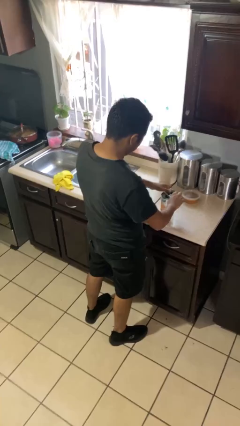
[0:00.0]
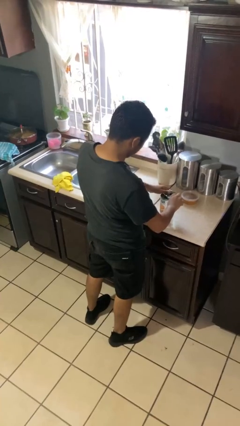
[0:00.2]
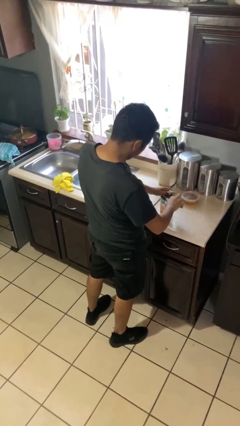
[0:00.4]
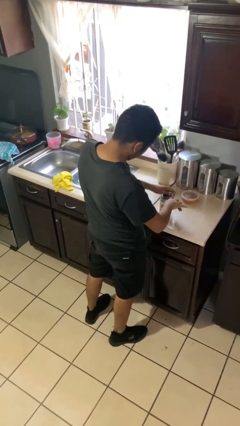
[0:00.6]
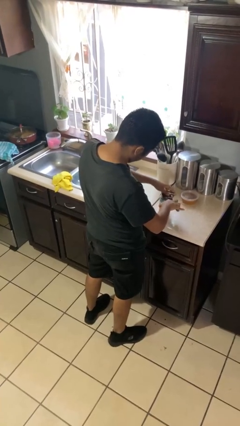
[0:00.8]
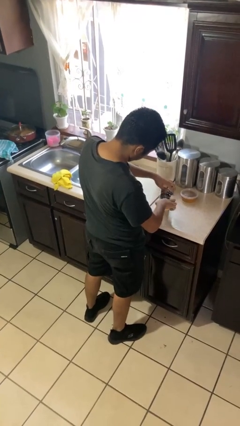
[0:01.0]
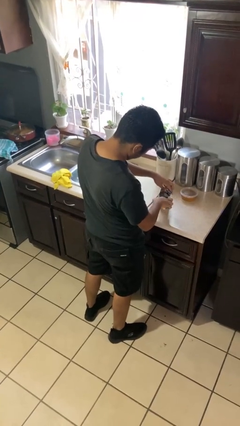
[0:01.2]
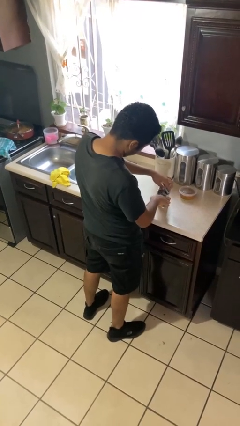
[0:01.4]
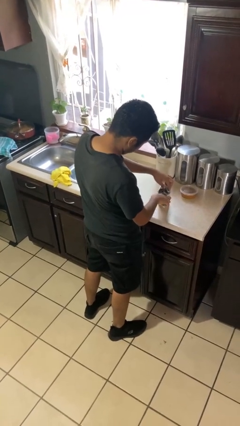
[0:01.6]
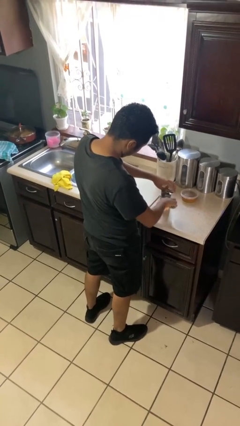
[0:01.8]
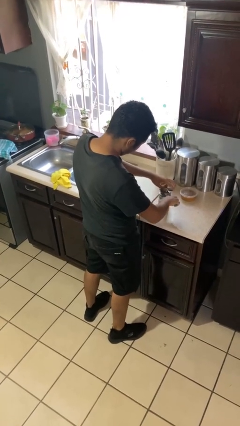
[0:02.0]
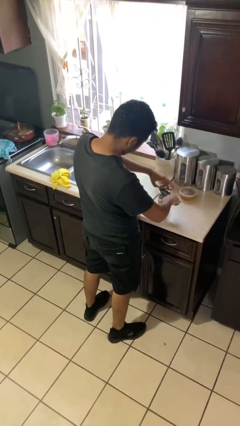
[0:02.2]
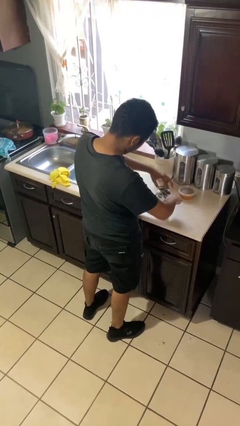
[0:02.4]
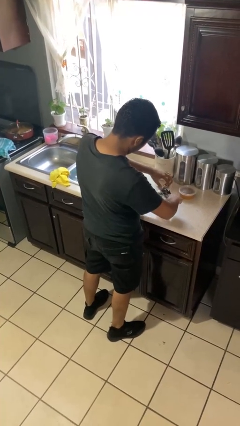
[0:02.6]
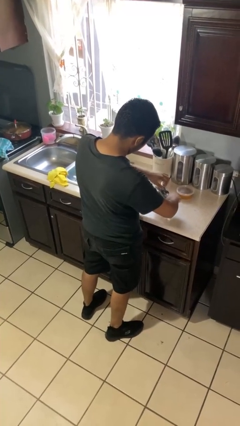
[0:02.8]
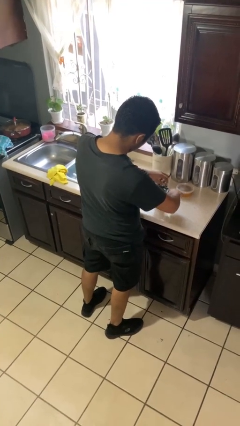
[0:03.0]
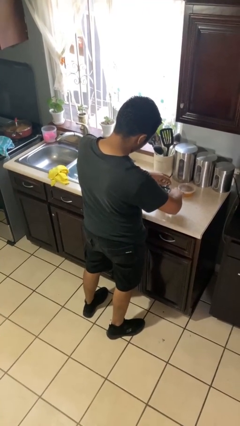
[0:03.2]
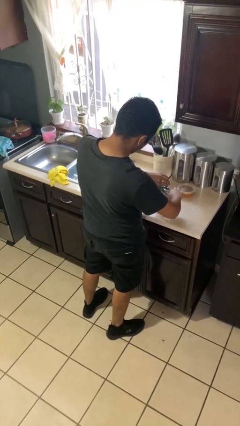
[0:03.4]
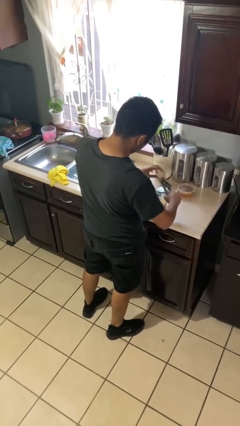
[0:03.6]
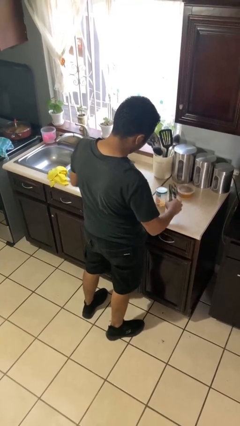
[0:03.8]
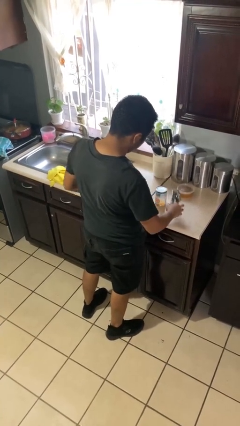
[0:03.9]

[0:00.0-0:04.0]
person opens can with can opener

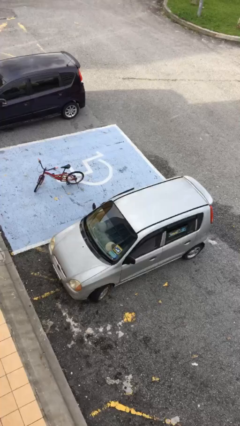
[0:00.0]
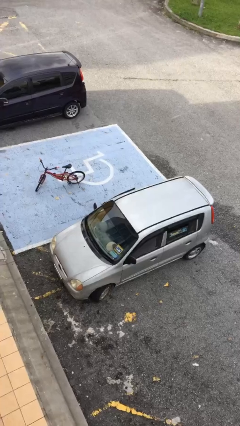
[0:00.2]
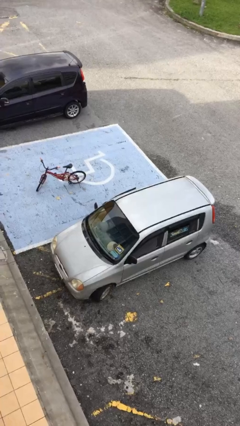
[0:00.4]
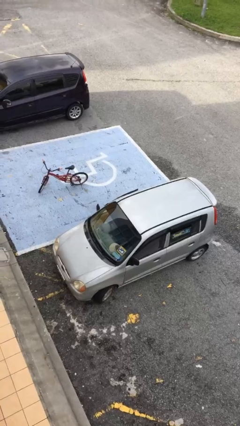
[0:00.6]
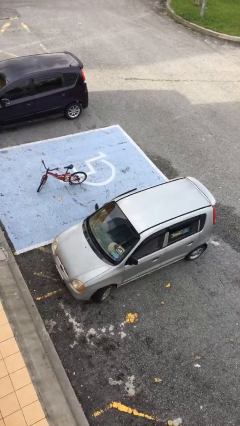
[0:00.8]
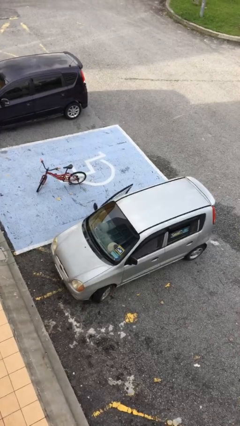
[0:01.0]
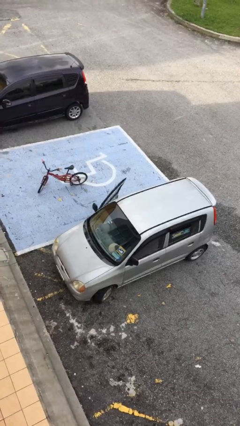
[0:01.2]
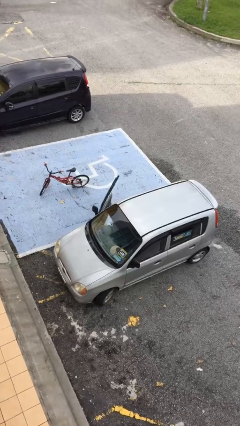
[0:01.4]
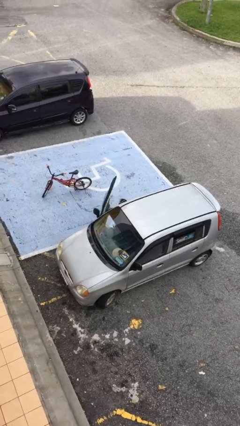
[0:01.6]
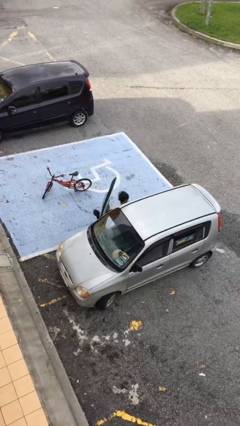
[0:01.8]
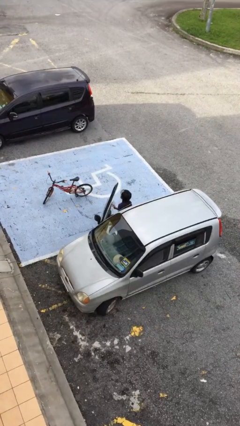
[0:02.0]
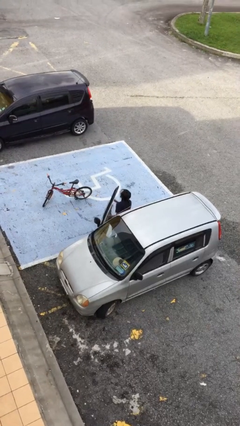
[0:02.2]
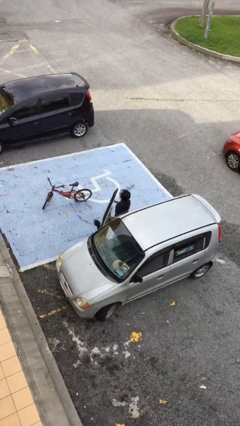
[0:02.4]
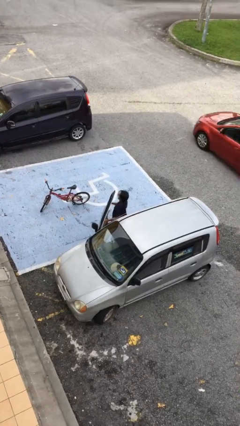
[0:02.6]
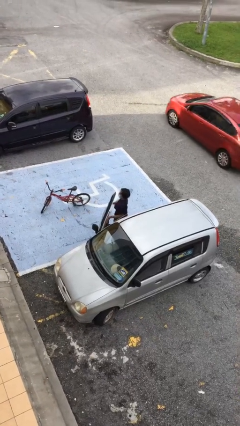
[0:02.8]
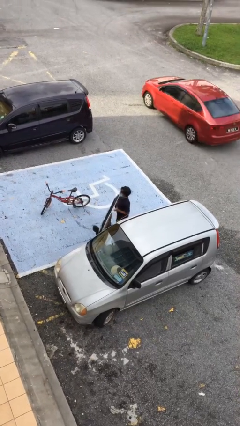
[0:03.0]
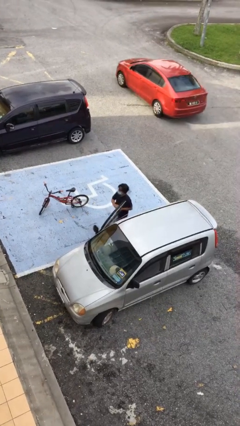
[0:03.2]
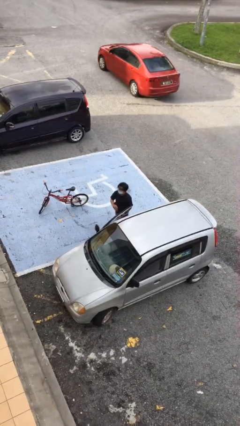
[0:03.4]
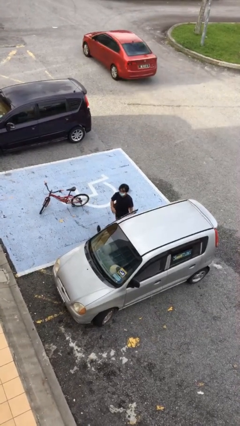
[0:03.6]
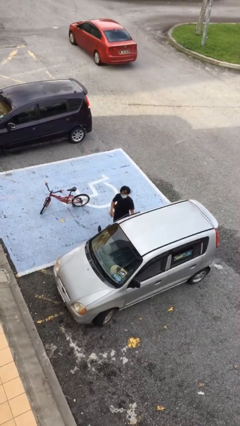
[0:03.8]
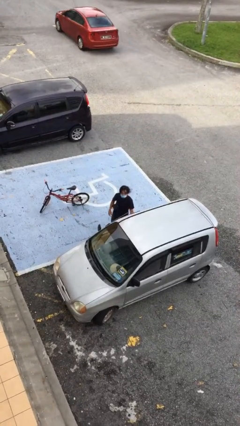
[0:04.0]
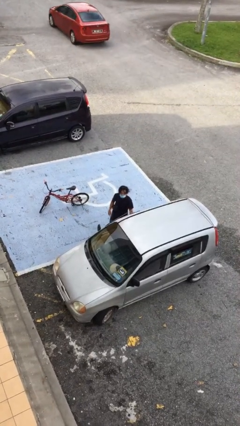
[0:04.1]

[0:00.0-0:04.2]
person exits car

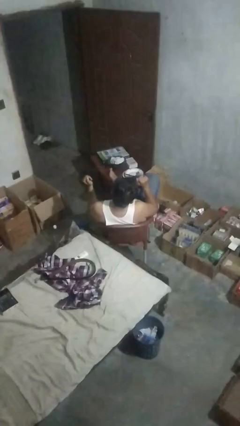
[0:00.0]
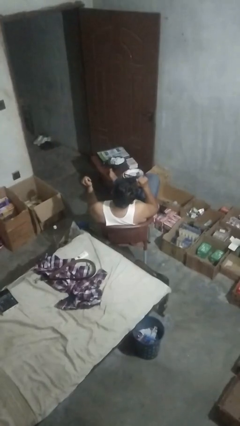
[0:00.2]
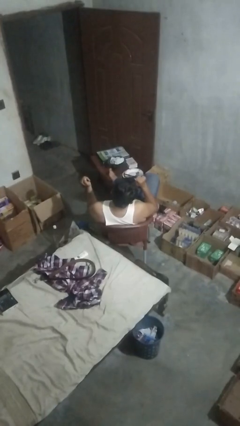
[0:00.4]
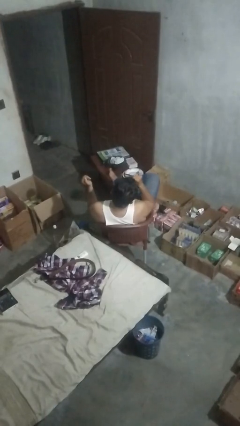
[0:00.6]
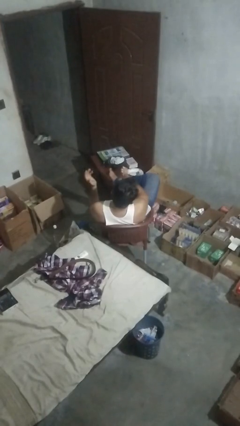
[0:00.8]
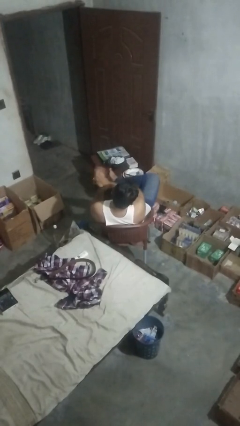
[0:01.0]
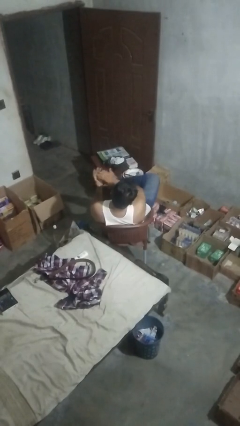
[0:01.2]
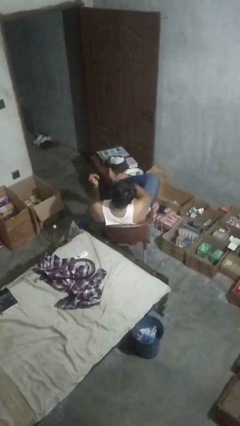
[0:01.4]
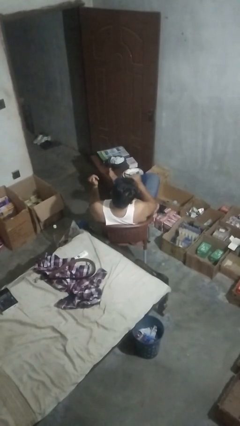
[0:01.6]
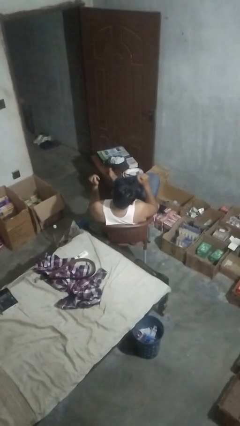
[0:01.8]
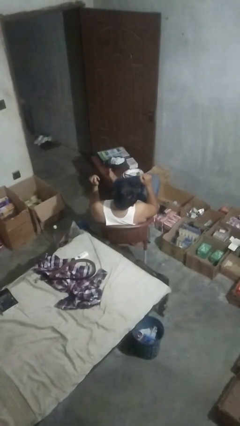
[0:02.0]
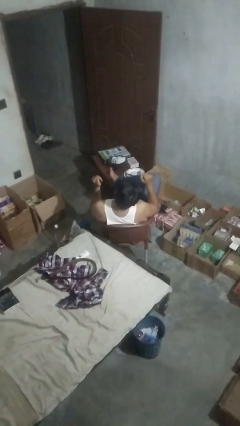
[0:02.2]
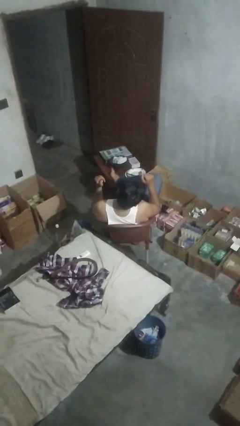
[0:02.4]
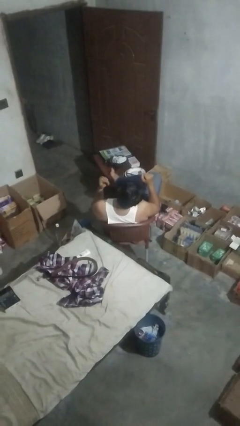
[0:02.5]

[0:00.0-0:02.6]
person claps hands

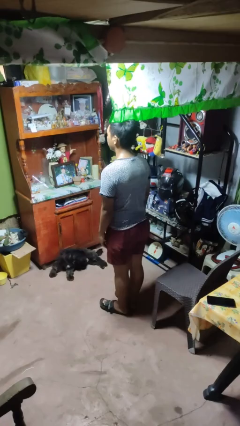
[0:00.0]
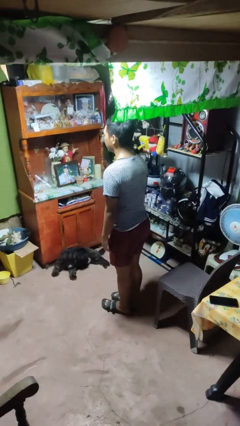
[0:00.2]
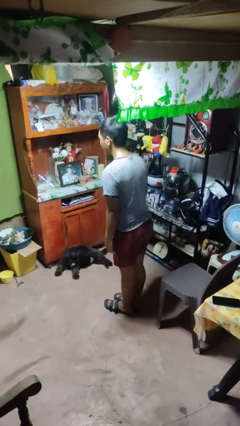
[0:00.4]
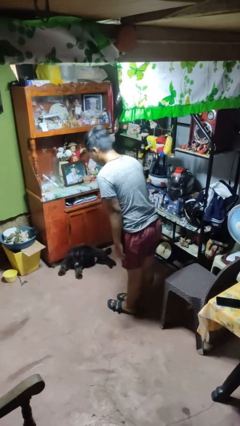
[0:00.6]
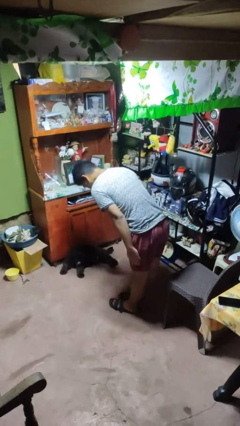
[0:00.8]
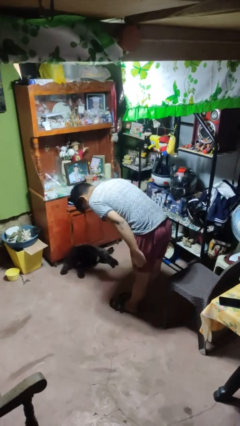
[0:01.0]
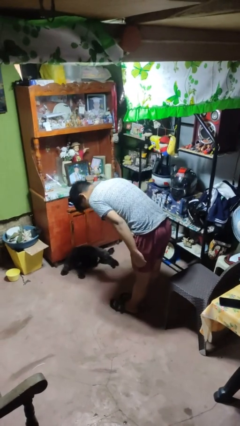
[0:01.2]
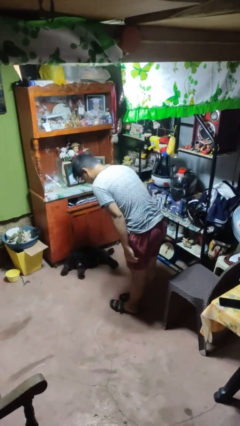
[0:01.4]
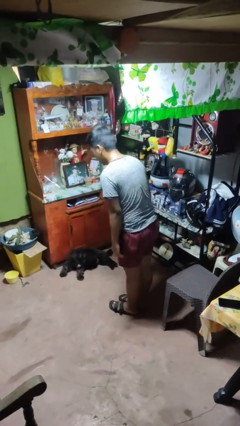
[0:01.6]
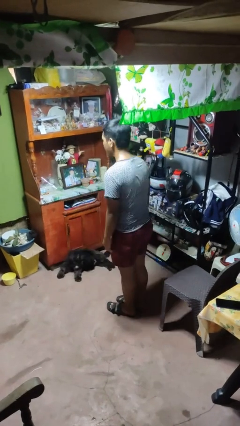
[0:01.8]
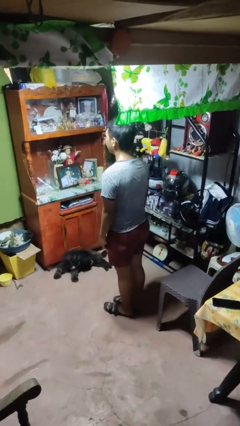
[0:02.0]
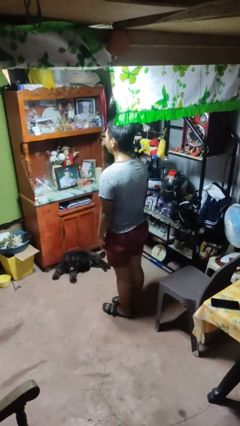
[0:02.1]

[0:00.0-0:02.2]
person bows

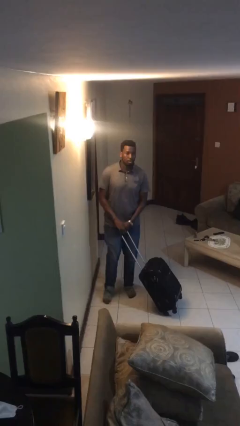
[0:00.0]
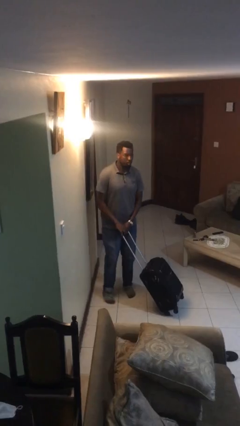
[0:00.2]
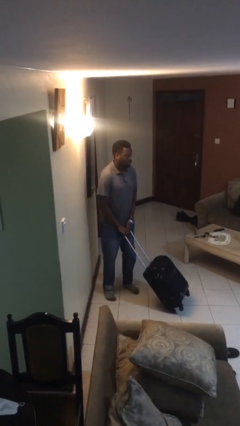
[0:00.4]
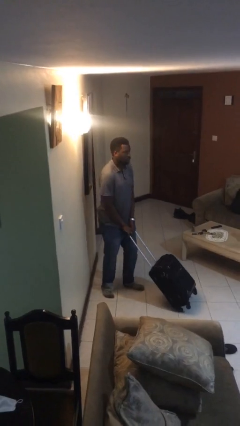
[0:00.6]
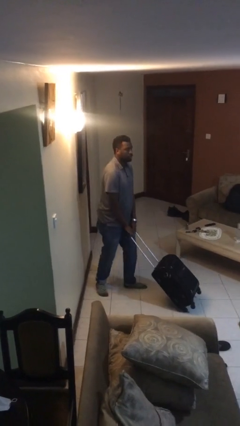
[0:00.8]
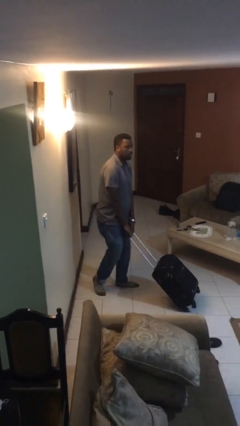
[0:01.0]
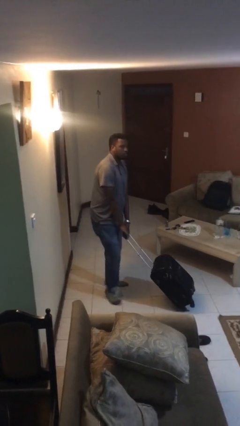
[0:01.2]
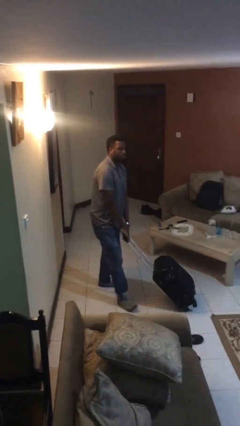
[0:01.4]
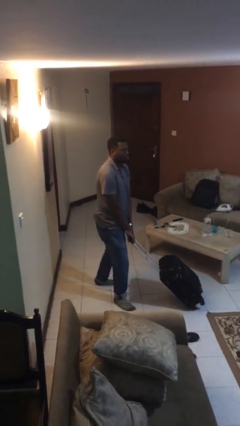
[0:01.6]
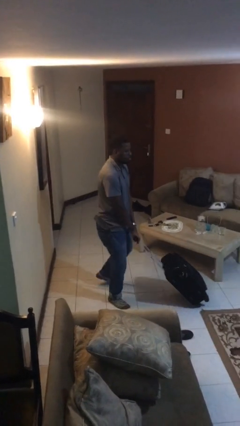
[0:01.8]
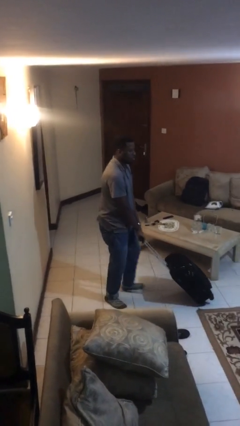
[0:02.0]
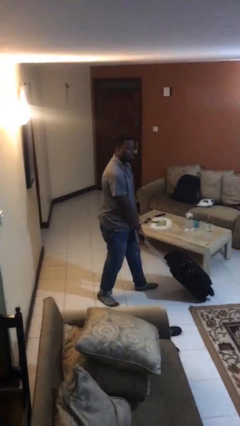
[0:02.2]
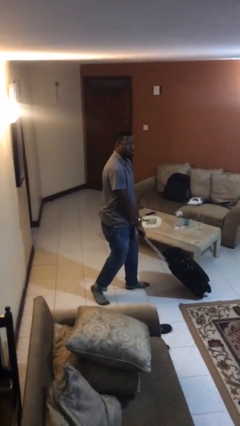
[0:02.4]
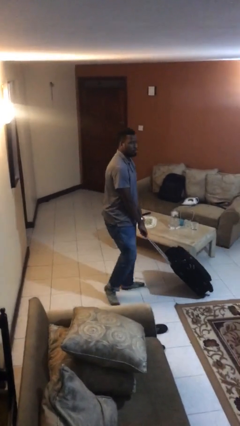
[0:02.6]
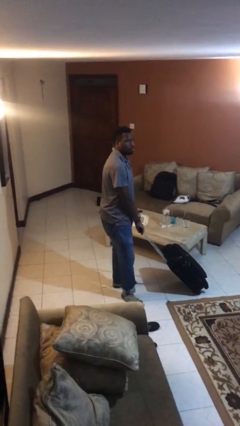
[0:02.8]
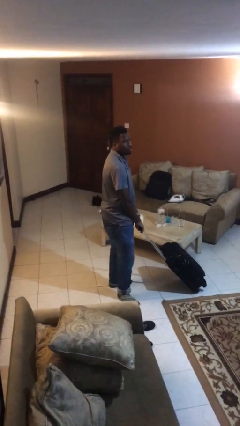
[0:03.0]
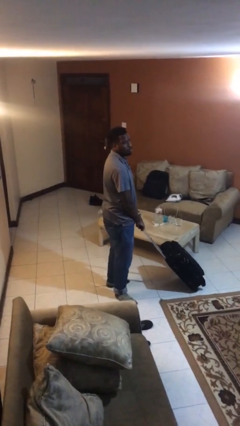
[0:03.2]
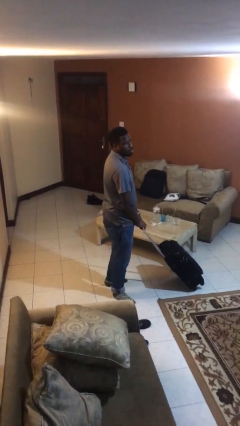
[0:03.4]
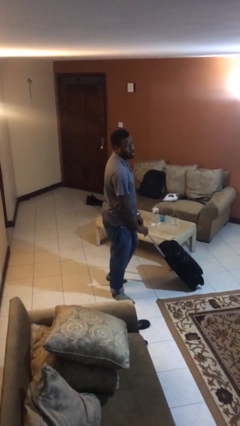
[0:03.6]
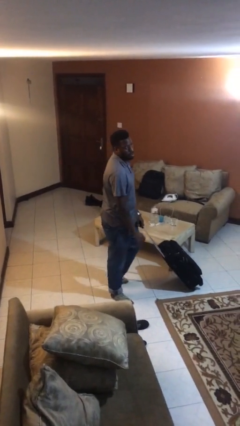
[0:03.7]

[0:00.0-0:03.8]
person pushes wheeled cart

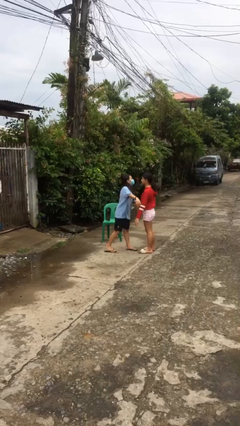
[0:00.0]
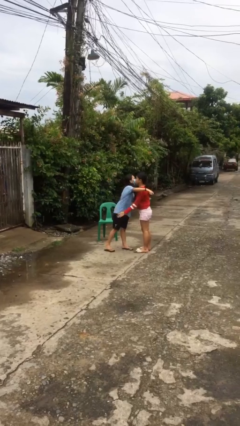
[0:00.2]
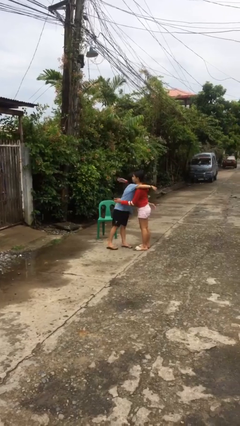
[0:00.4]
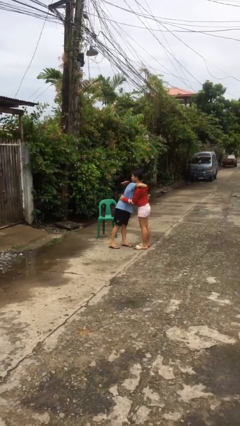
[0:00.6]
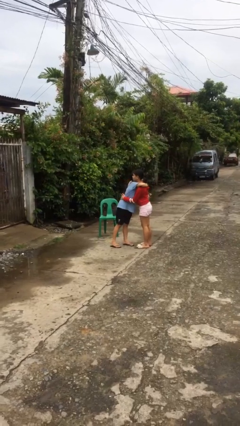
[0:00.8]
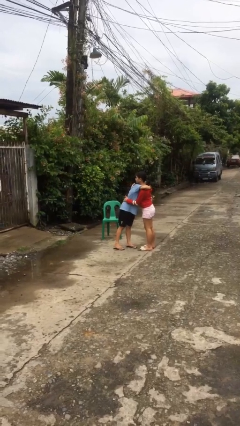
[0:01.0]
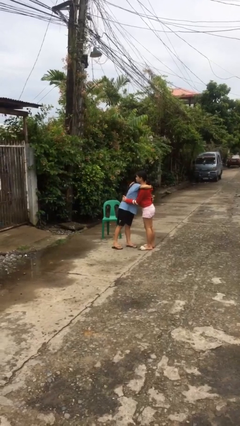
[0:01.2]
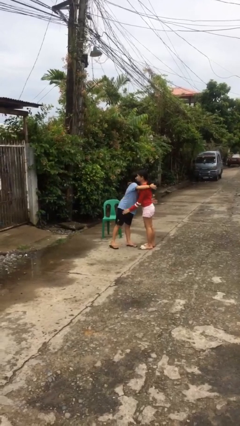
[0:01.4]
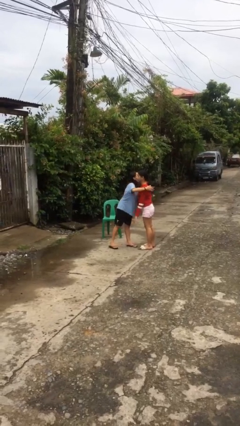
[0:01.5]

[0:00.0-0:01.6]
person embraces person
